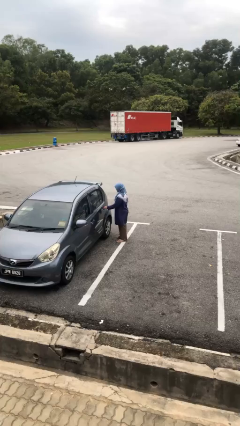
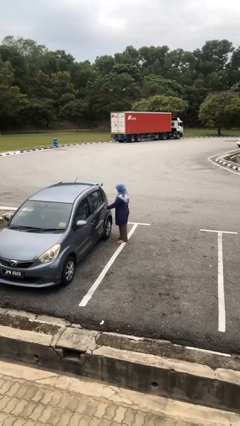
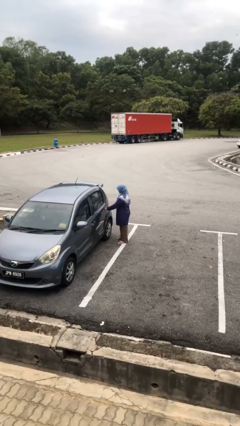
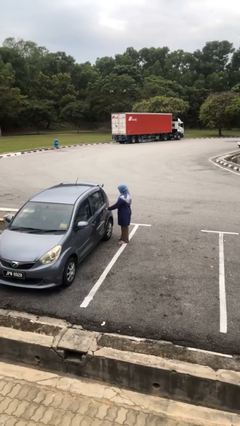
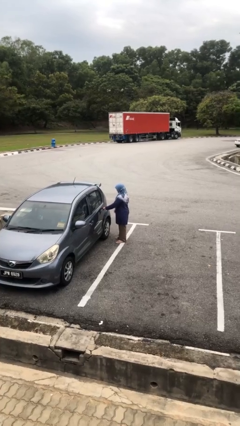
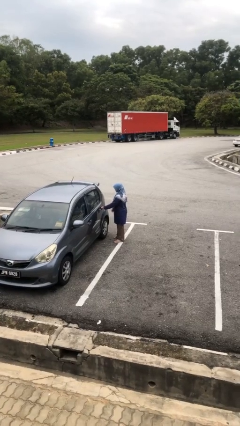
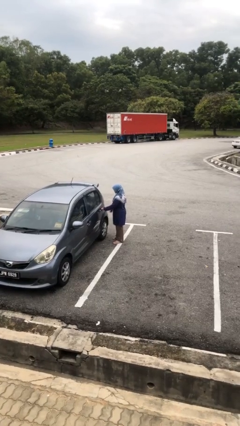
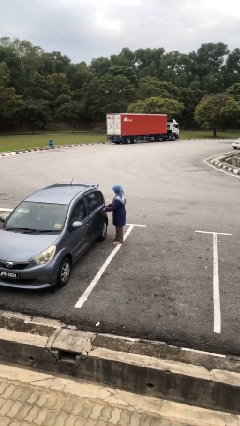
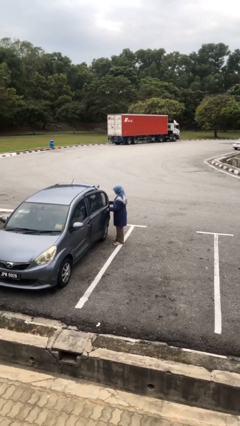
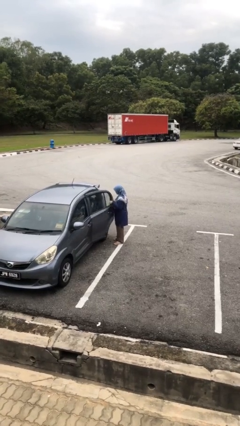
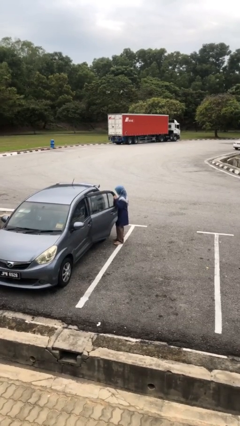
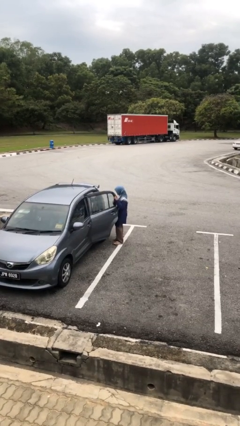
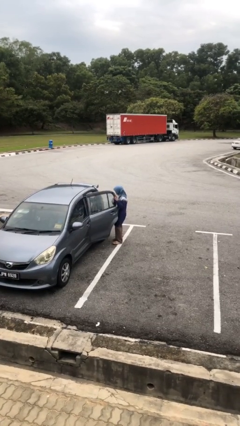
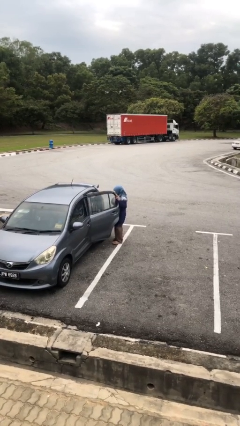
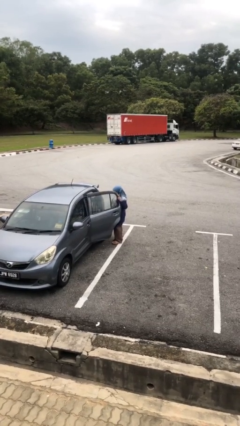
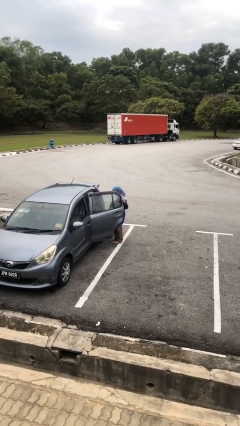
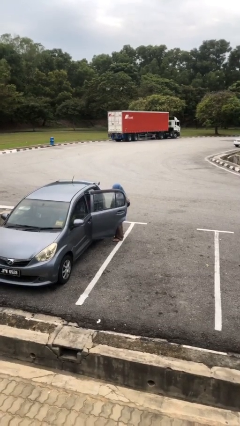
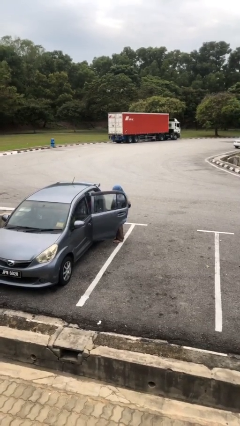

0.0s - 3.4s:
person opens car door

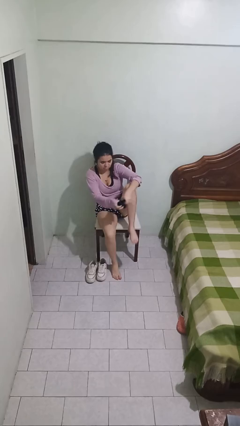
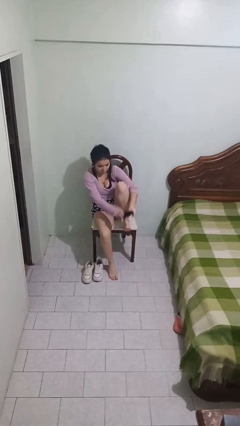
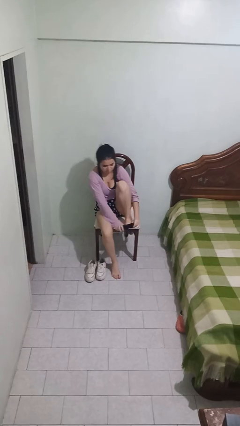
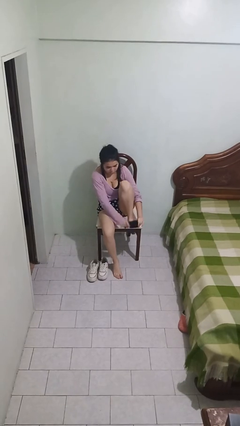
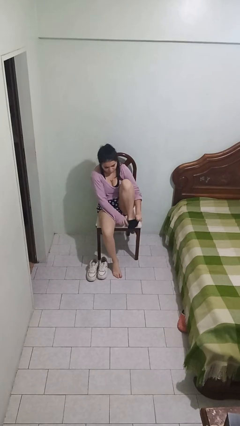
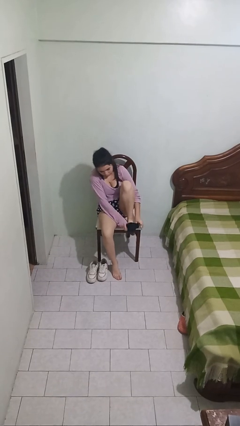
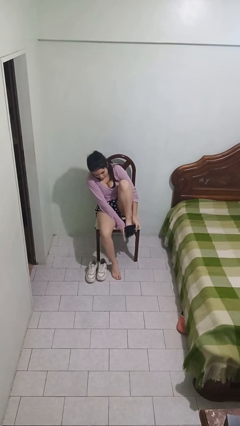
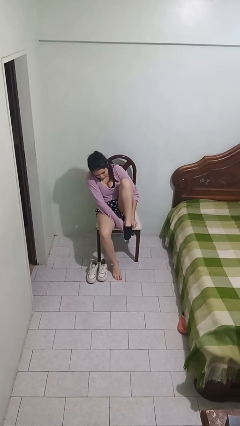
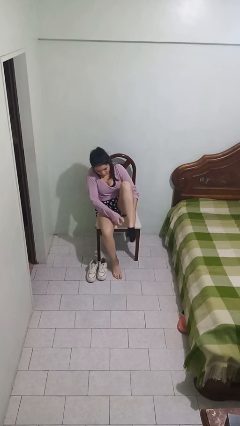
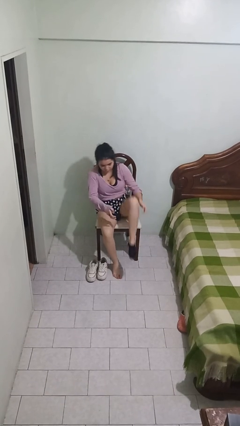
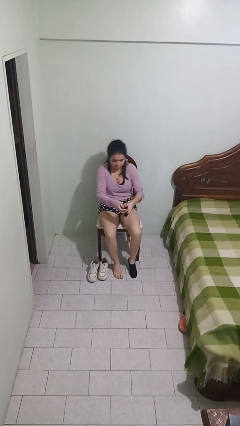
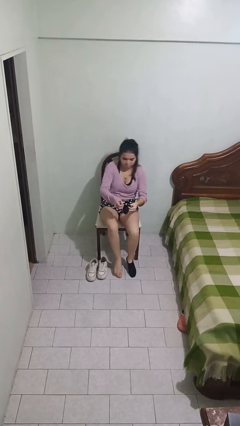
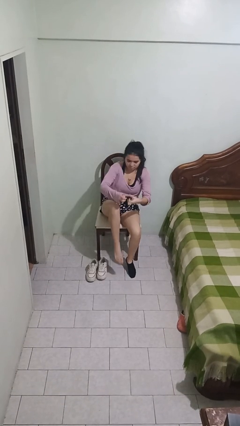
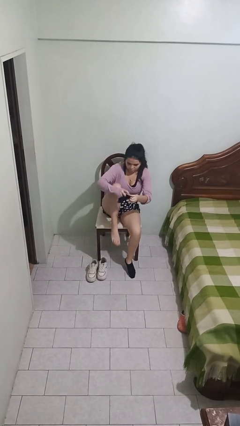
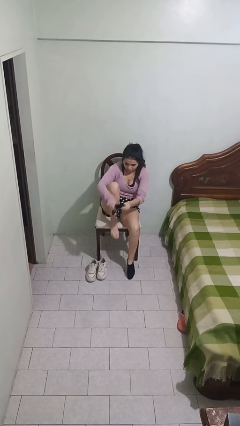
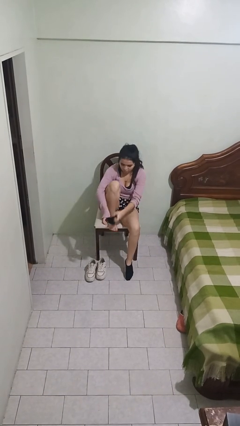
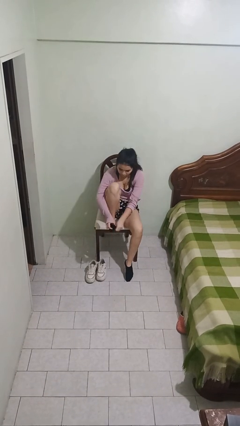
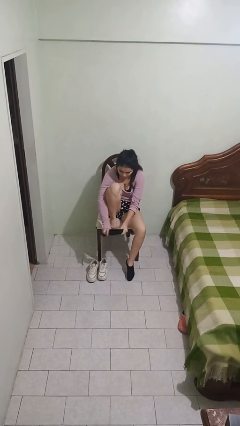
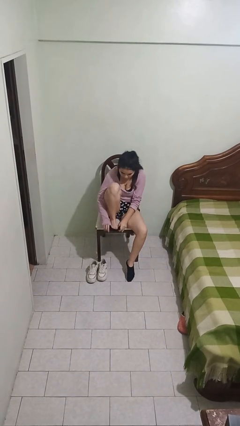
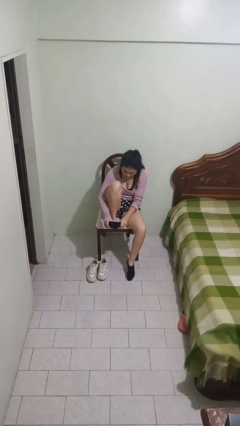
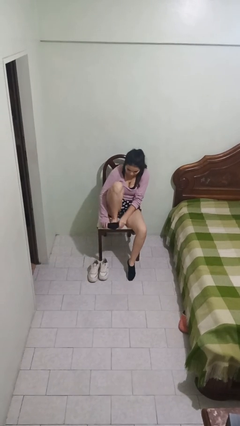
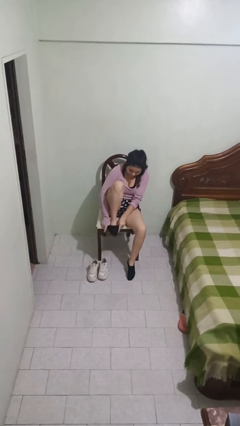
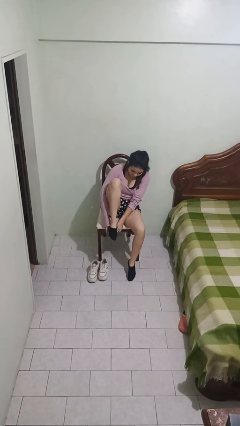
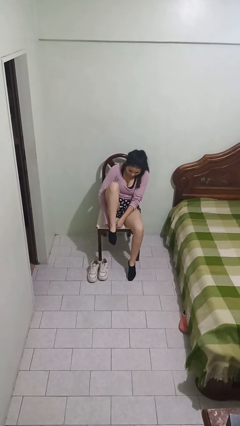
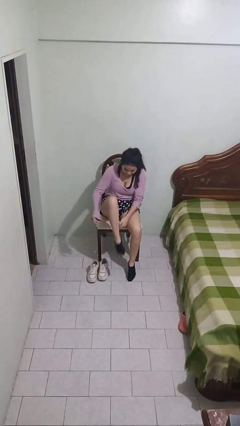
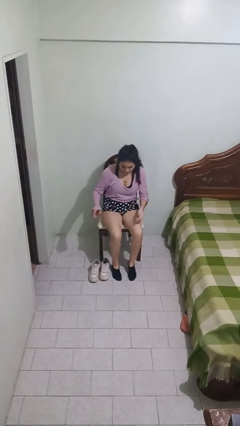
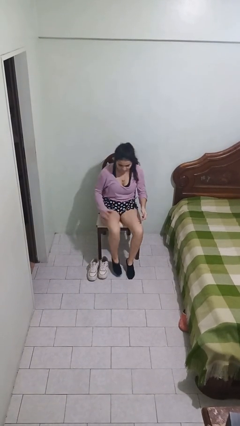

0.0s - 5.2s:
person puts on socks

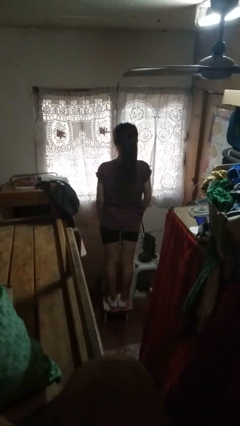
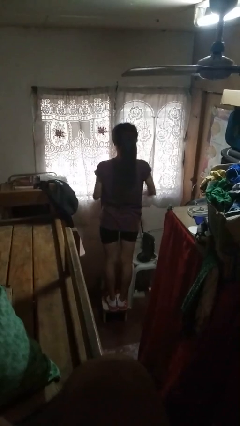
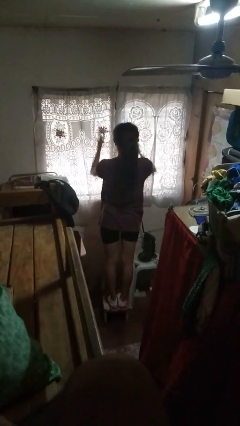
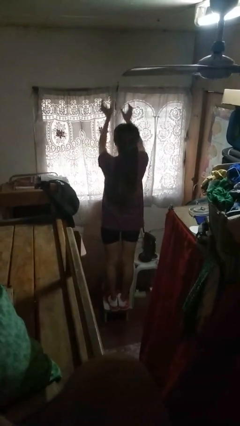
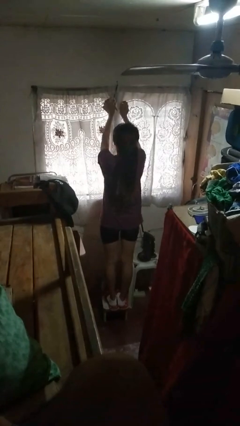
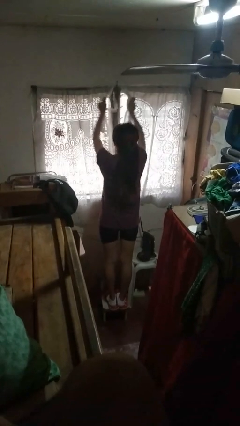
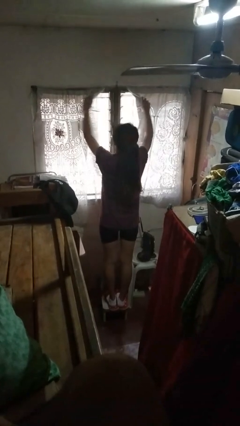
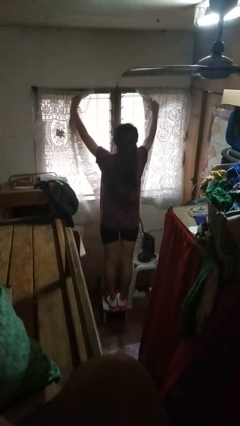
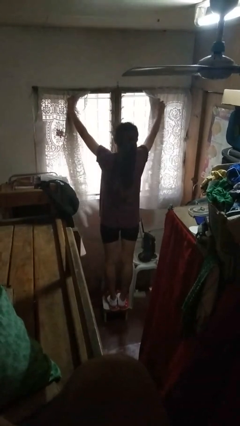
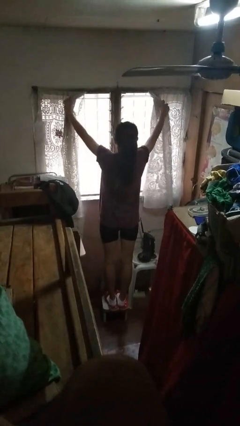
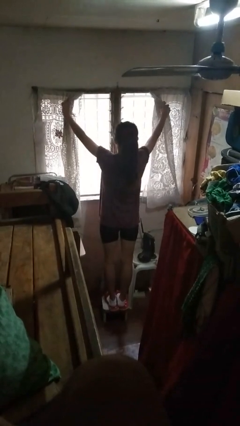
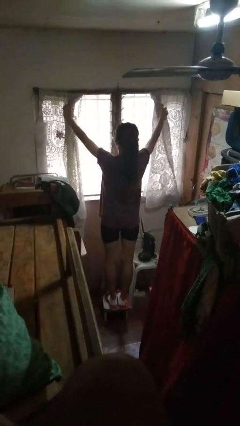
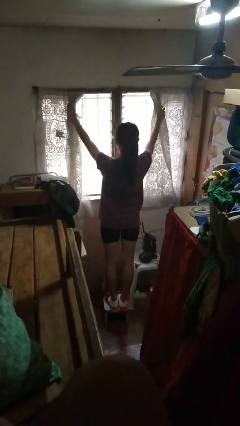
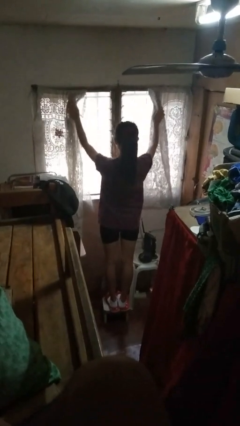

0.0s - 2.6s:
person opens curtains

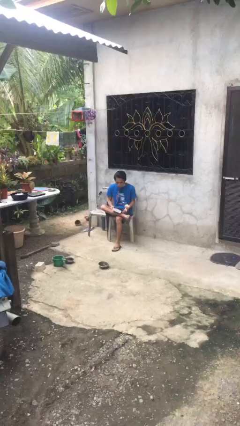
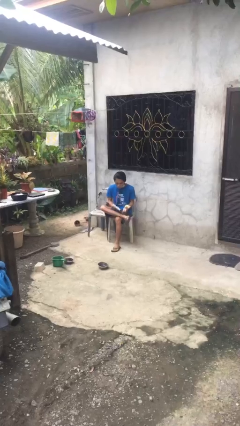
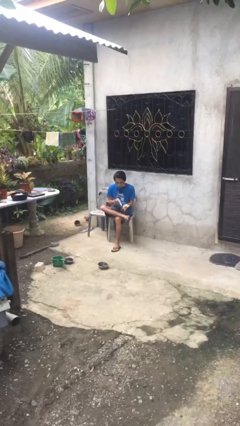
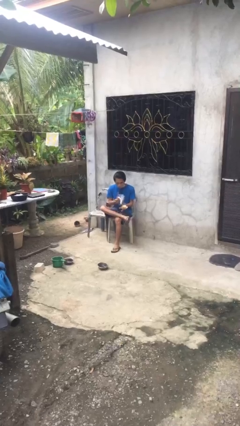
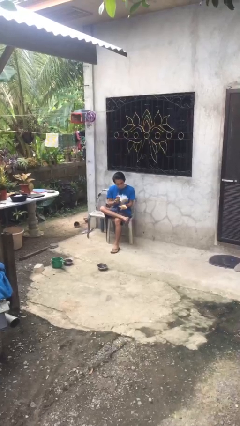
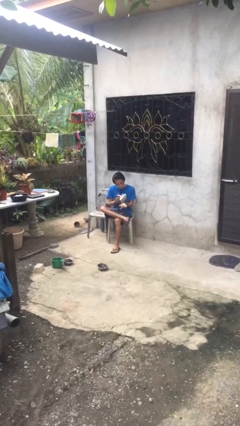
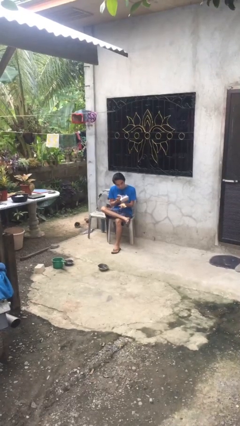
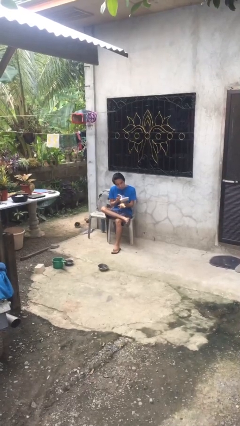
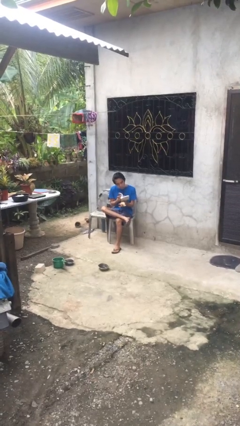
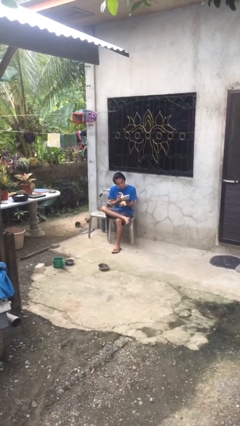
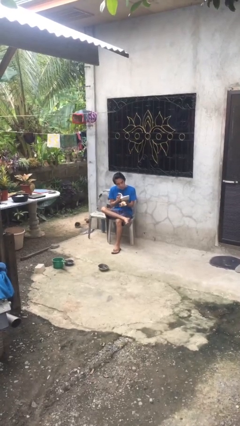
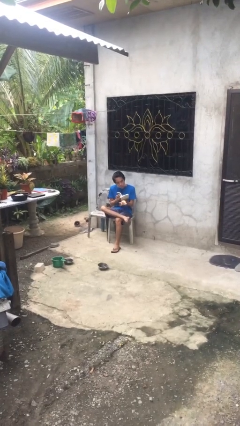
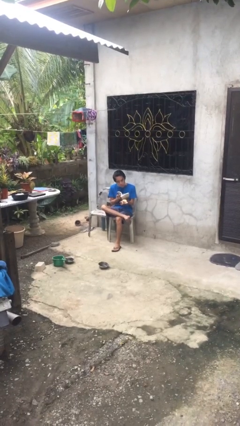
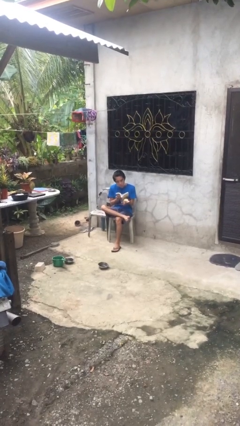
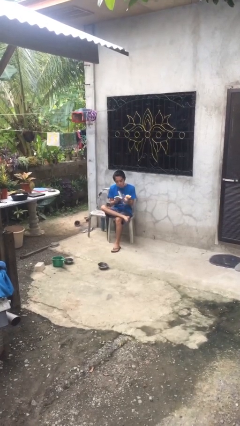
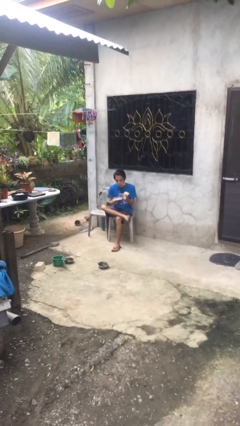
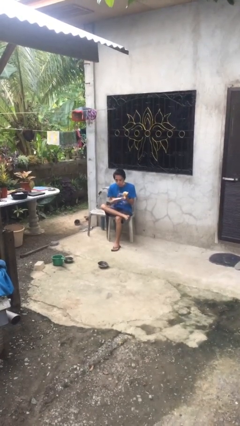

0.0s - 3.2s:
person reads document

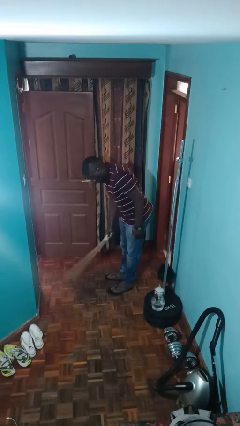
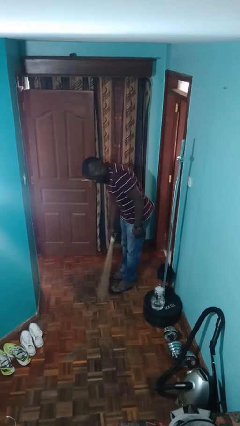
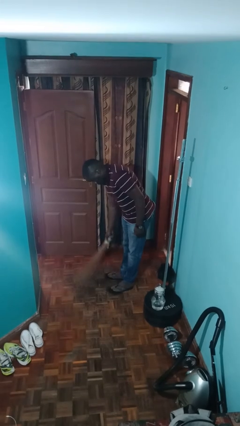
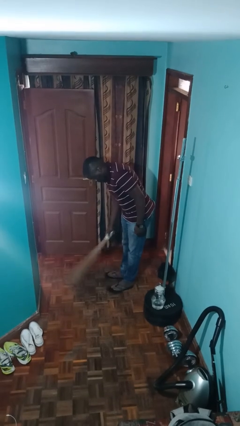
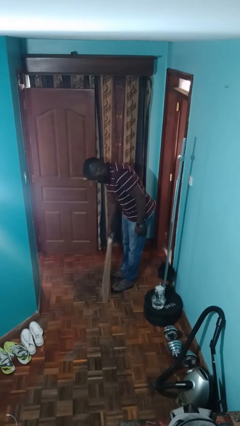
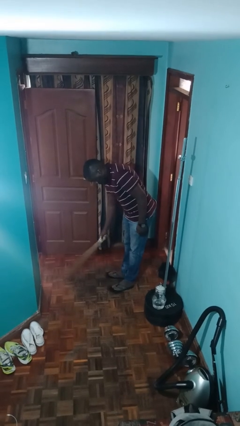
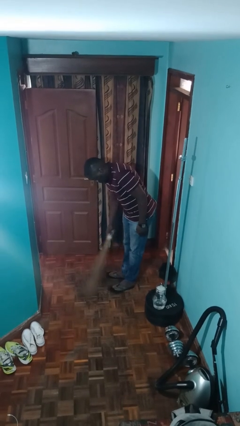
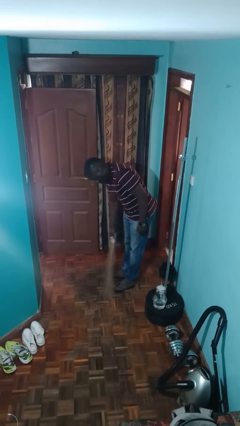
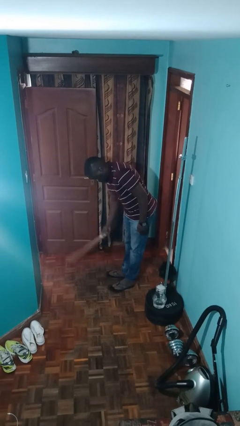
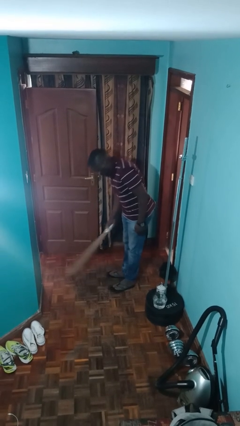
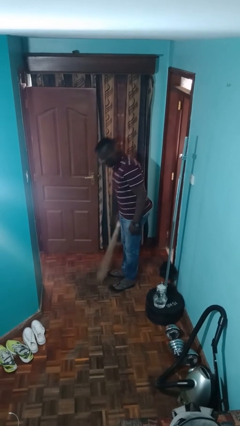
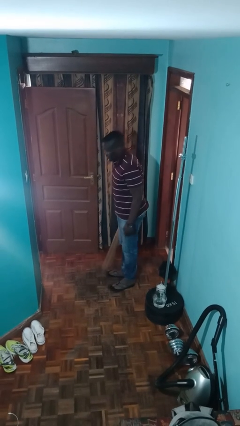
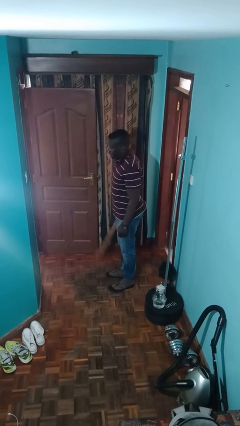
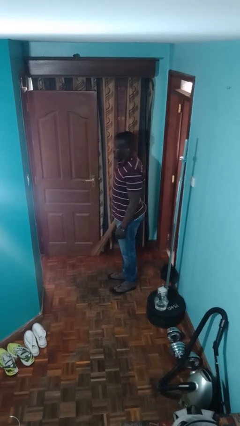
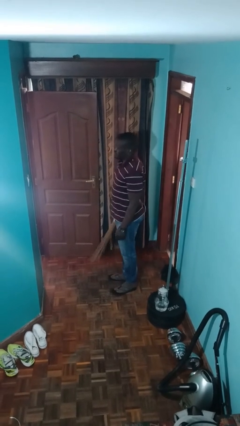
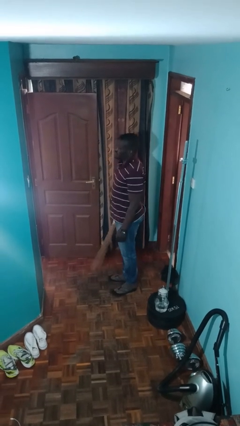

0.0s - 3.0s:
person sweeps floor

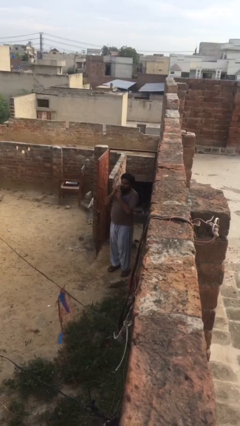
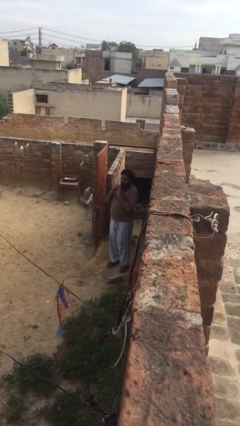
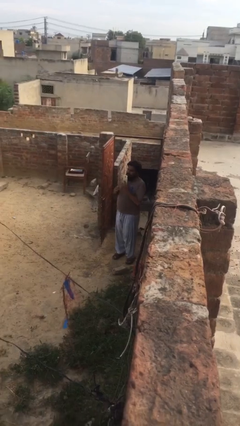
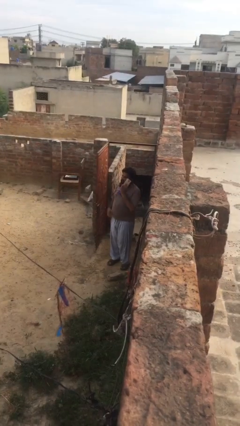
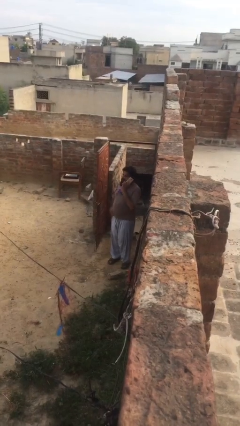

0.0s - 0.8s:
person closes facility door
